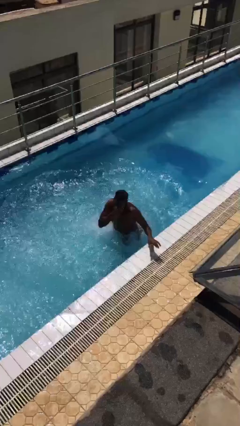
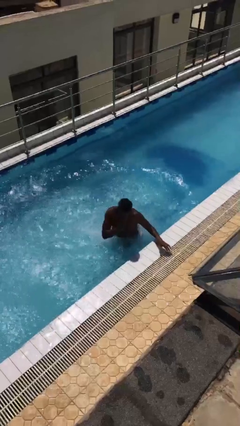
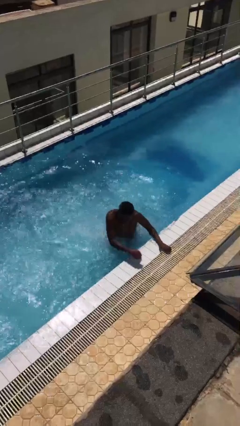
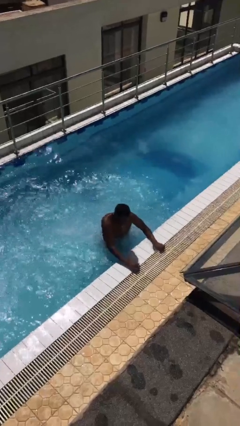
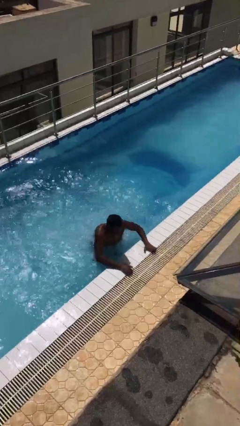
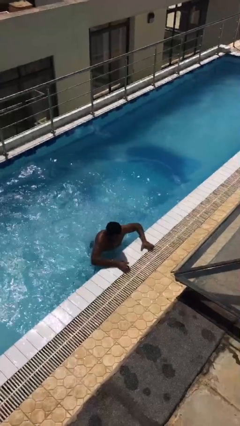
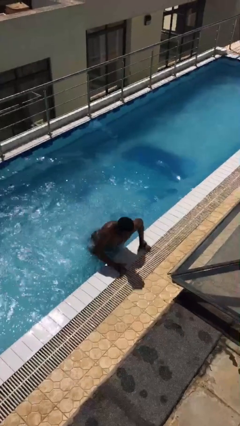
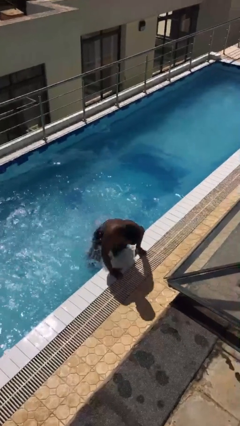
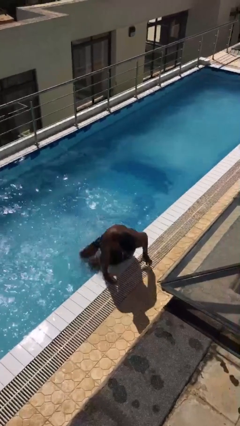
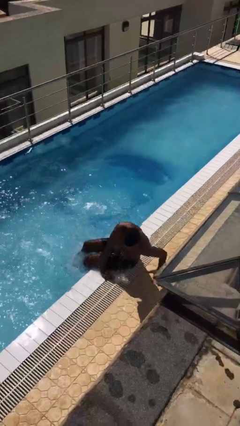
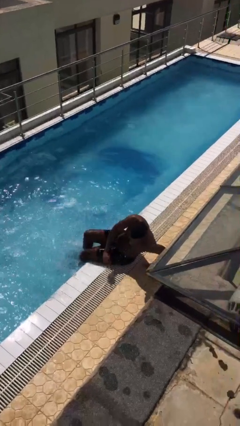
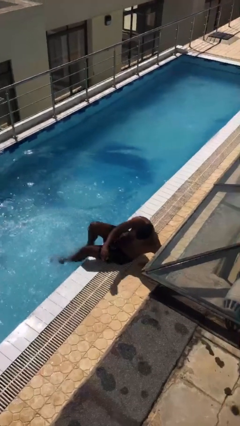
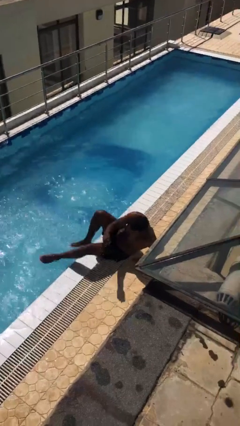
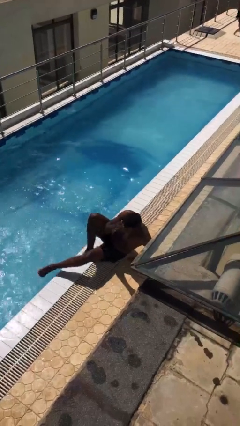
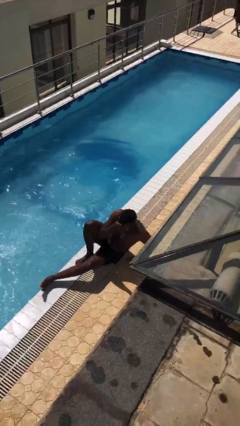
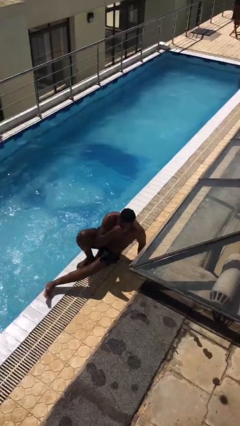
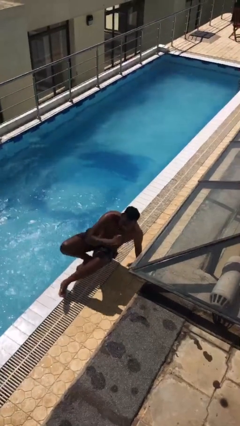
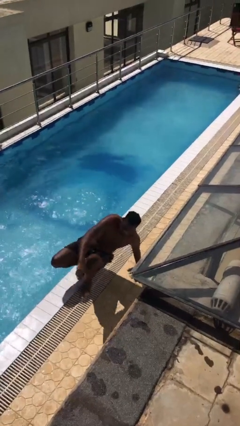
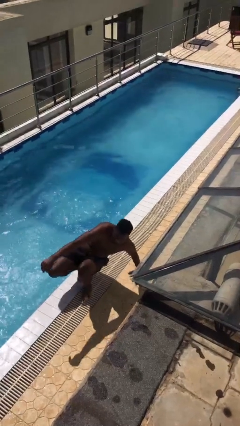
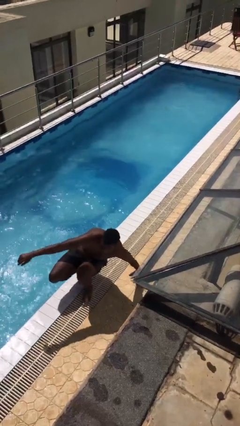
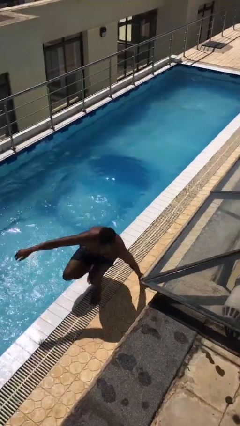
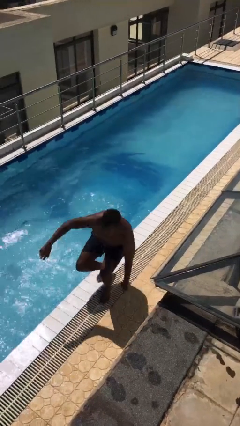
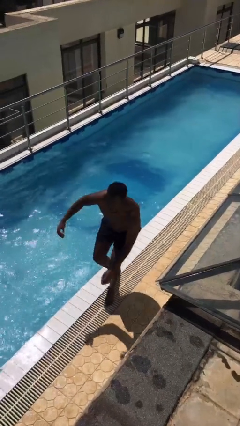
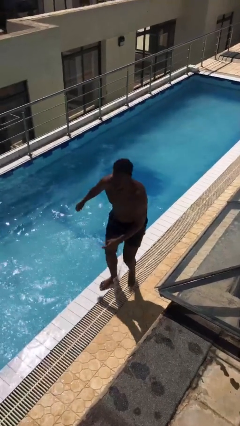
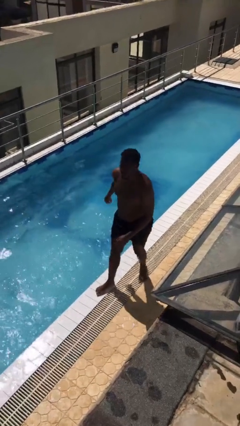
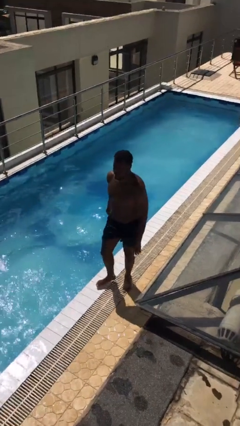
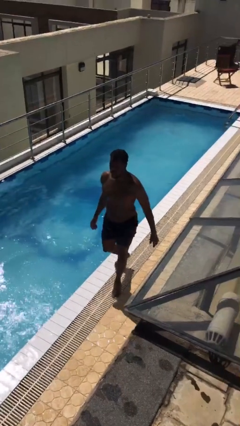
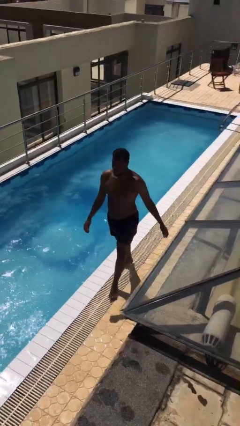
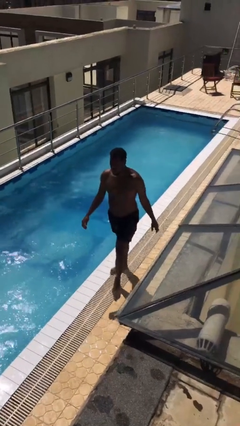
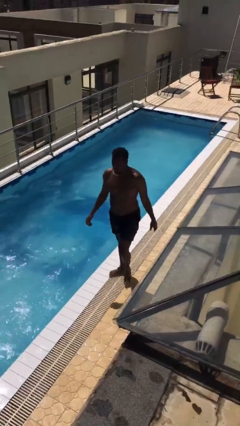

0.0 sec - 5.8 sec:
person exits pool

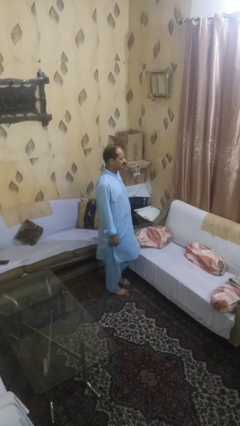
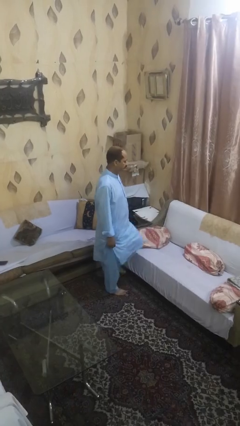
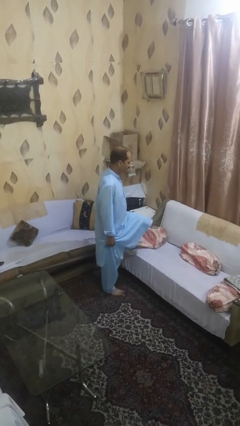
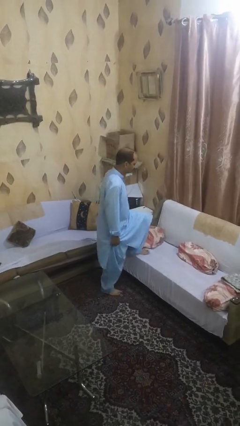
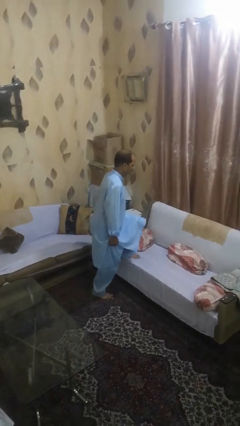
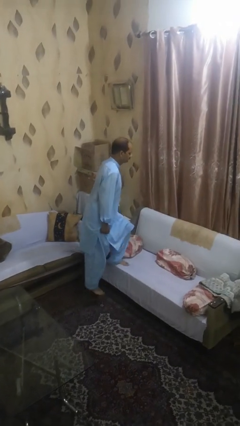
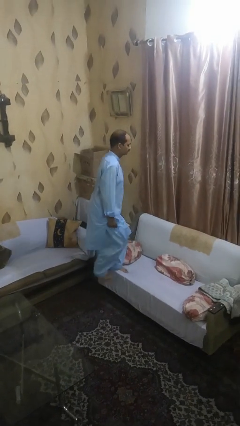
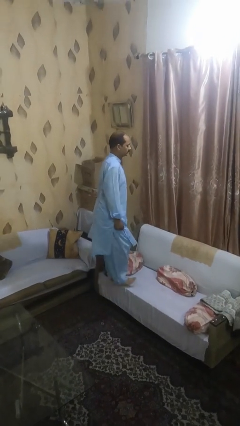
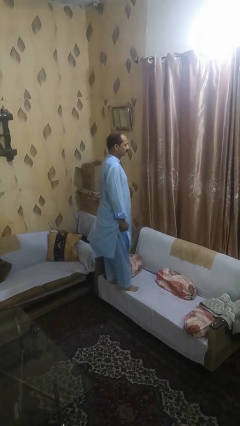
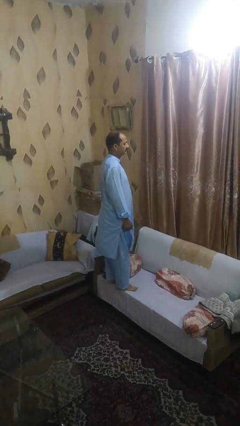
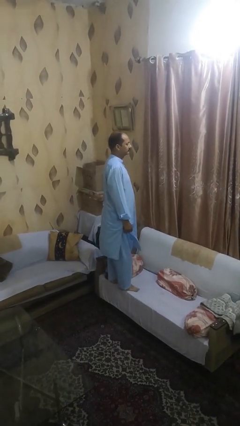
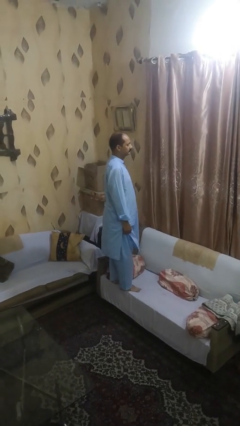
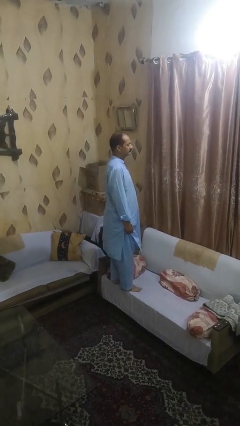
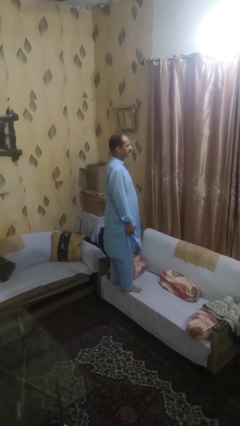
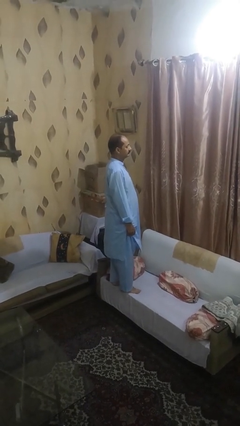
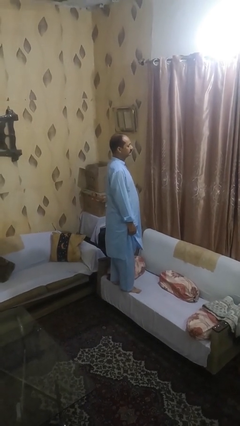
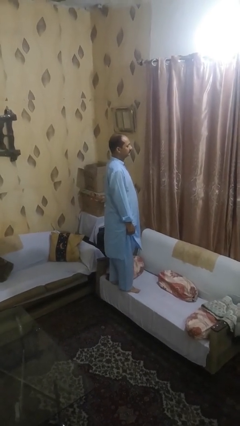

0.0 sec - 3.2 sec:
person climbs on chair

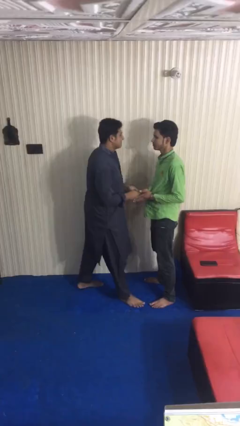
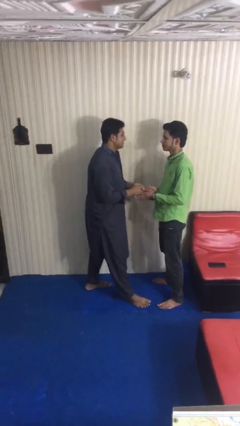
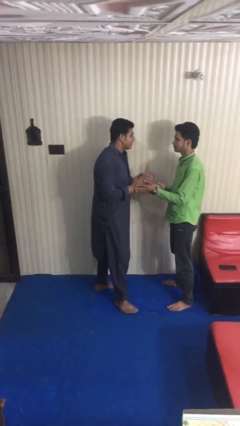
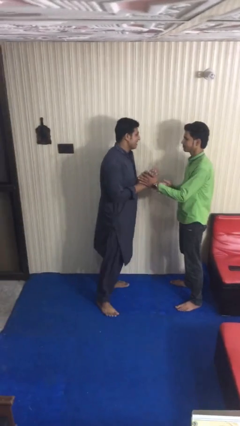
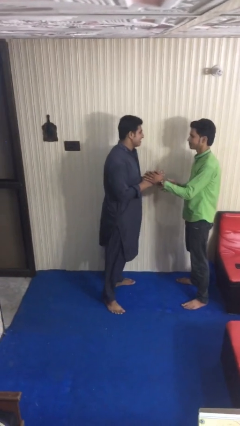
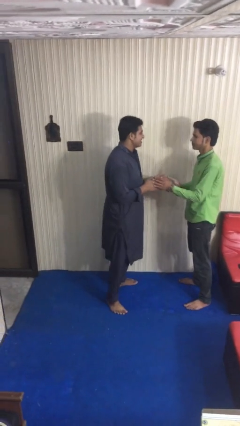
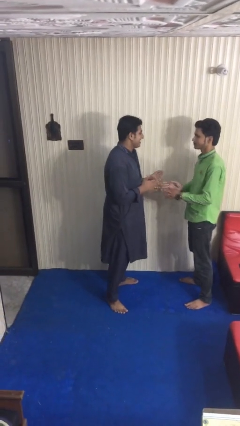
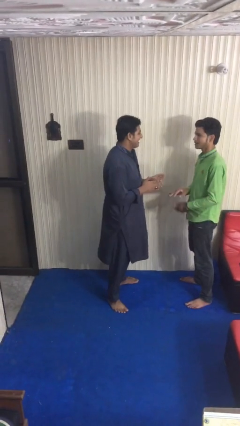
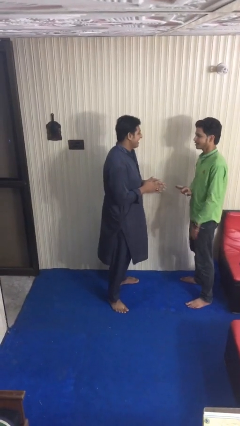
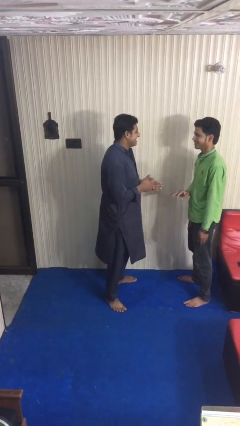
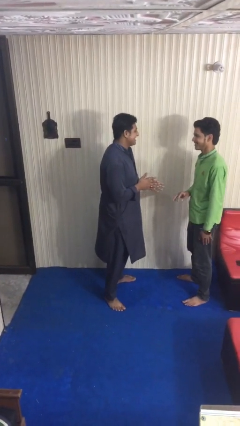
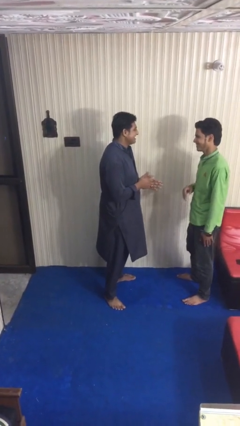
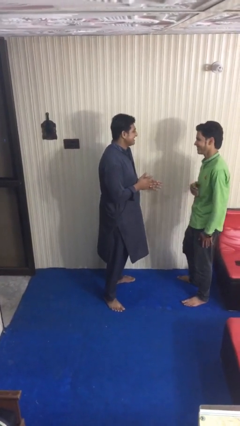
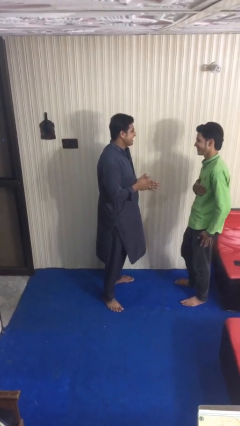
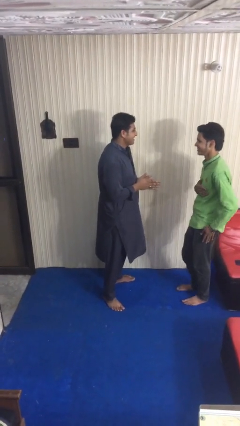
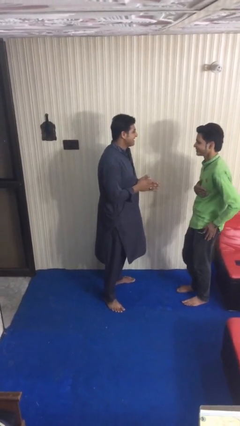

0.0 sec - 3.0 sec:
person talks to person

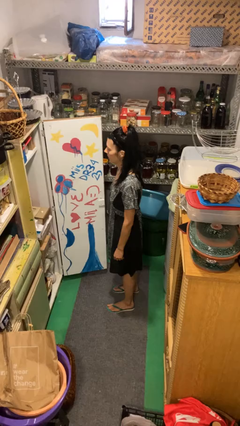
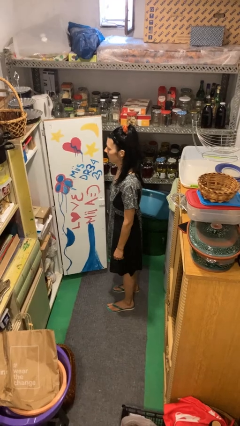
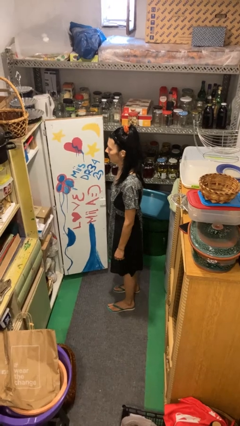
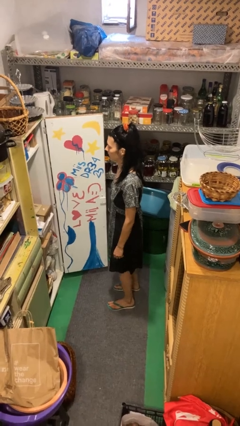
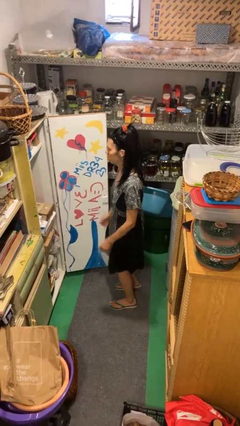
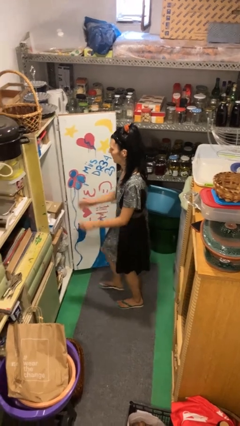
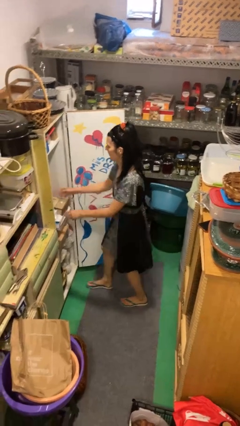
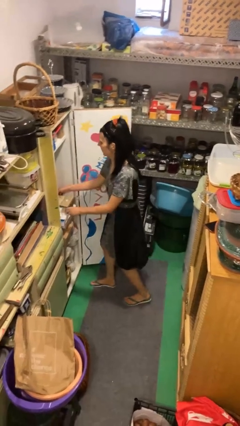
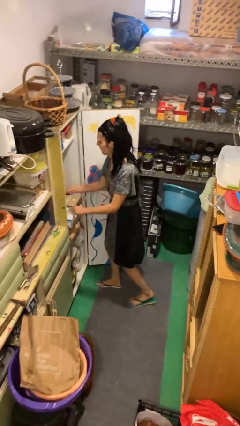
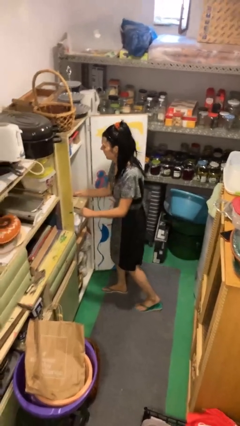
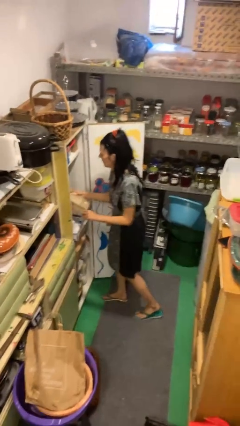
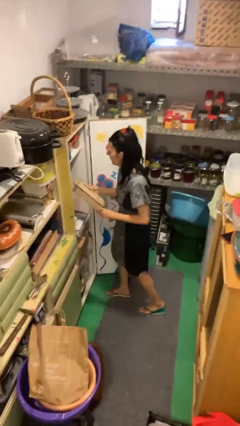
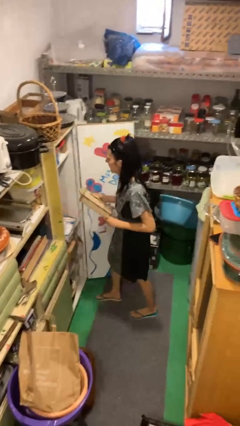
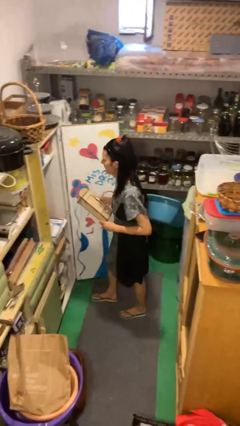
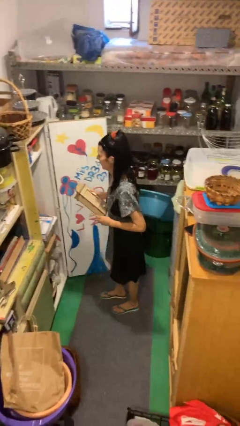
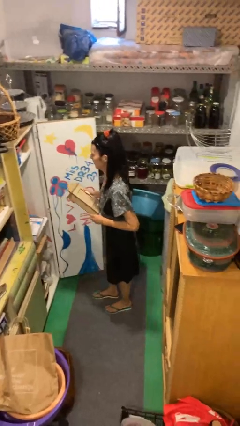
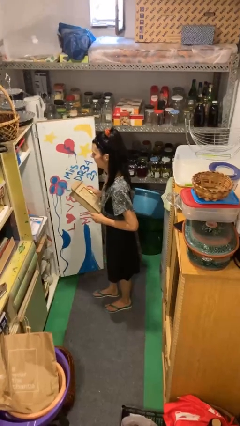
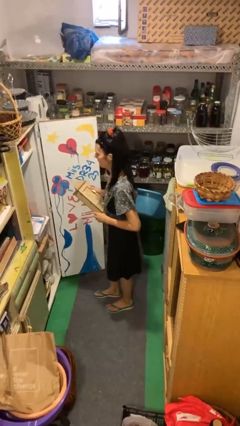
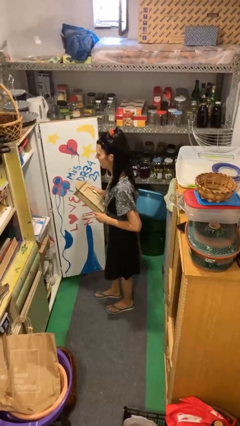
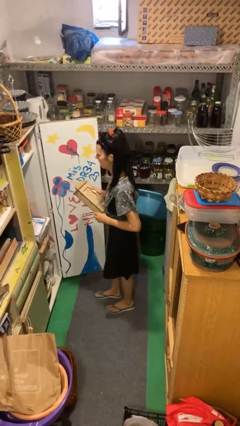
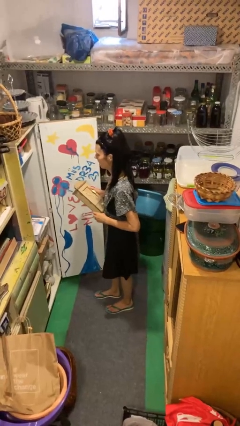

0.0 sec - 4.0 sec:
person picks up object from cabinet

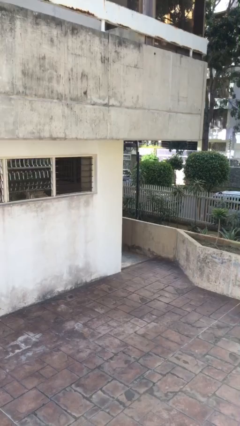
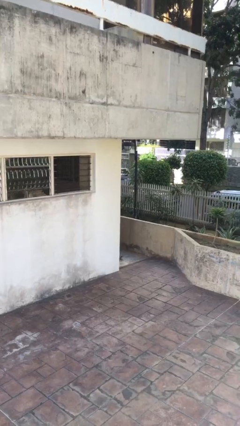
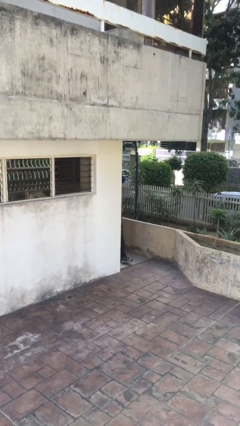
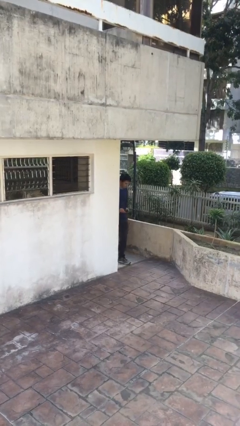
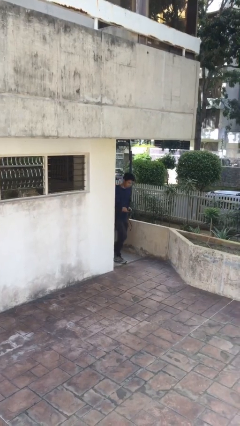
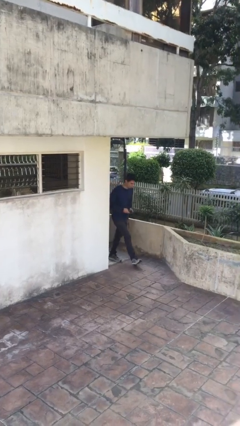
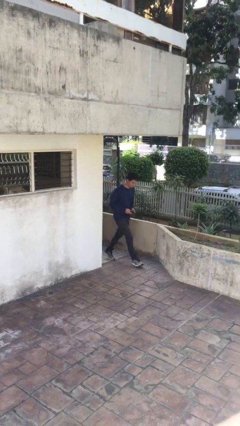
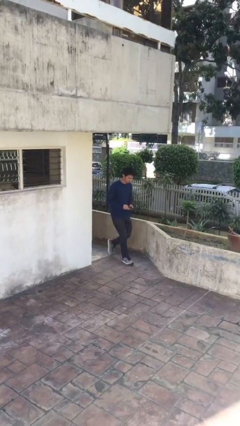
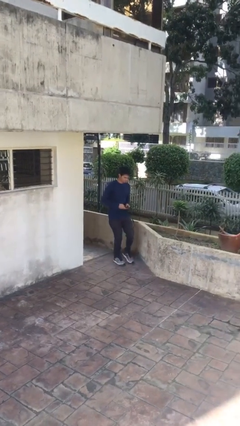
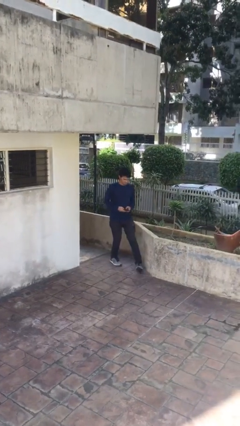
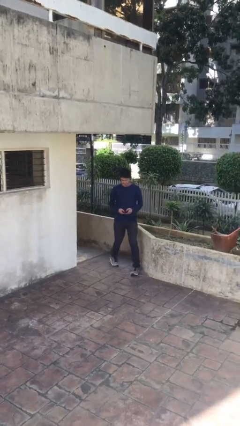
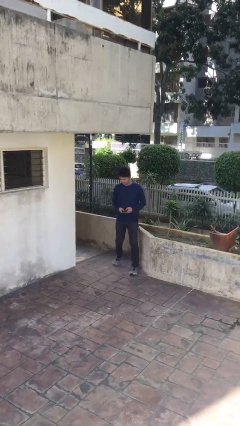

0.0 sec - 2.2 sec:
person enters scene through structure
